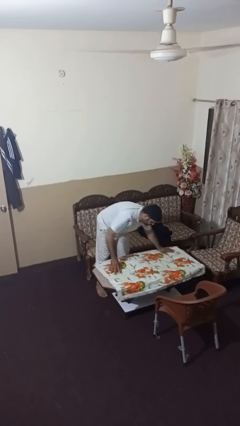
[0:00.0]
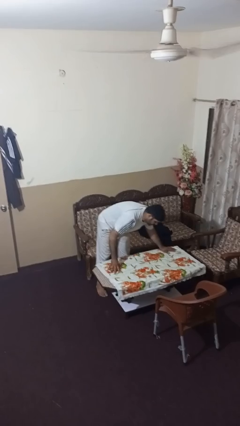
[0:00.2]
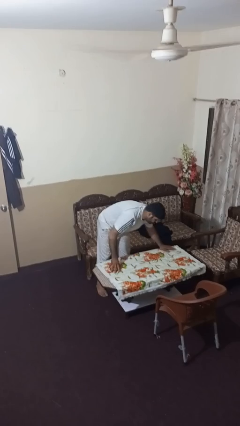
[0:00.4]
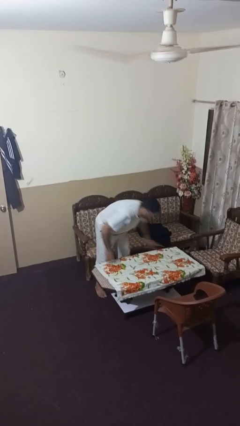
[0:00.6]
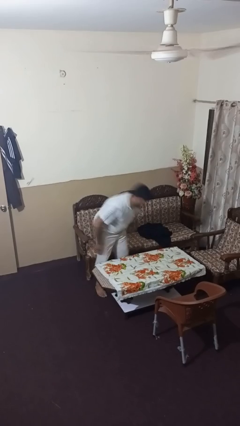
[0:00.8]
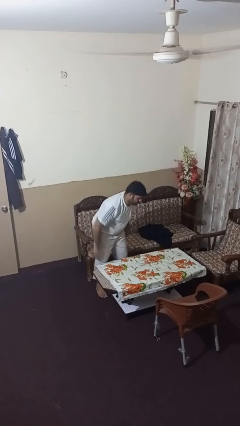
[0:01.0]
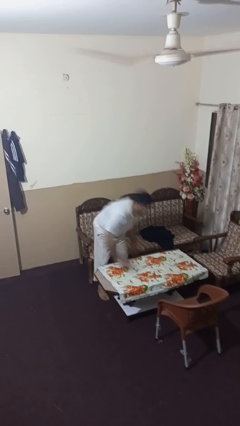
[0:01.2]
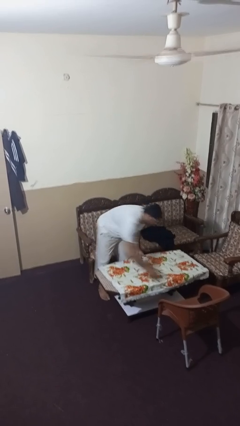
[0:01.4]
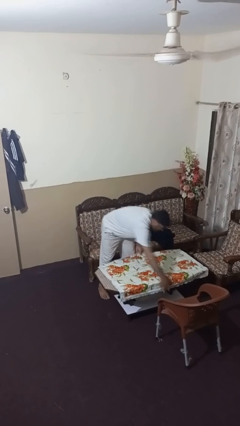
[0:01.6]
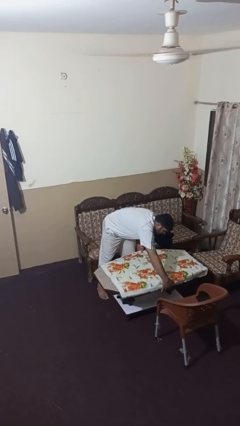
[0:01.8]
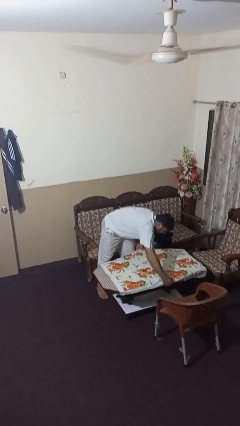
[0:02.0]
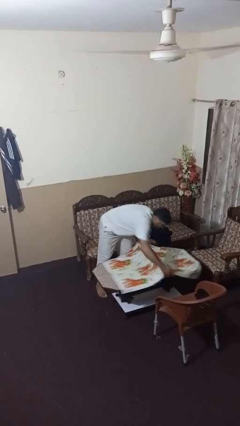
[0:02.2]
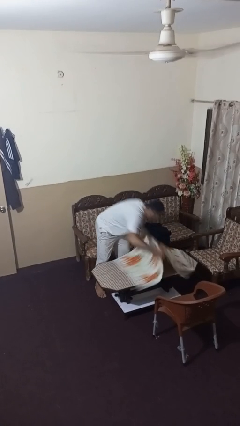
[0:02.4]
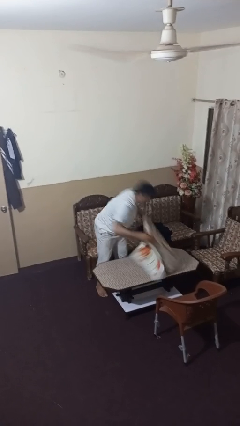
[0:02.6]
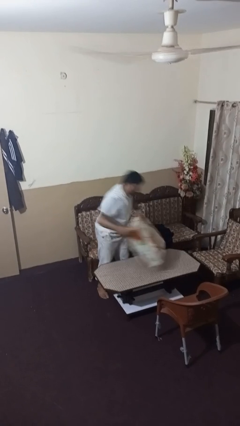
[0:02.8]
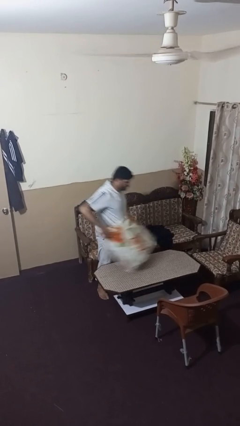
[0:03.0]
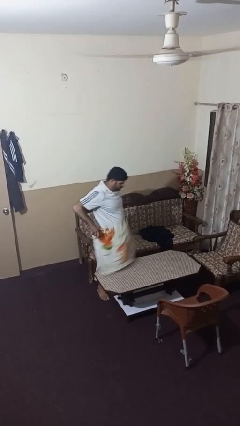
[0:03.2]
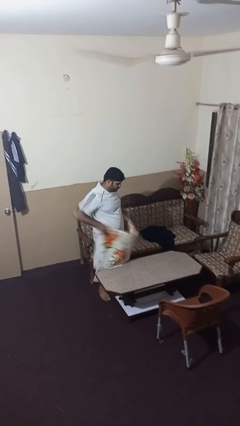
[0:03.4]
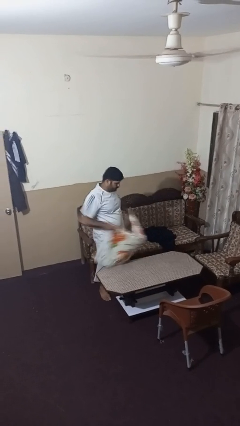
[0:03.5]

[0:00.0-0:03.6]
person folds tablecloth

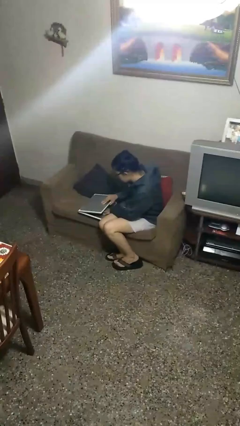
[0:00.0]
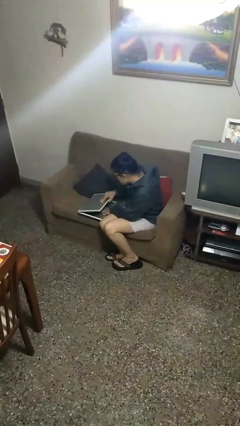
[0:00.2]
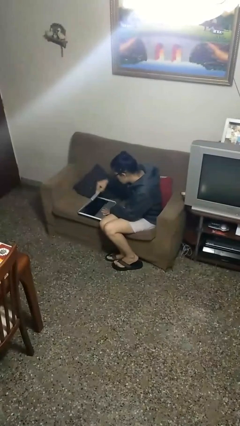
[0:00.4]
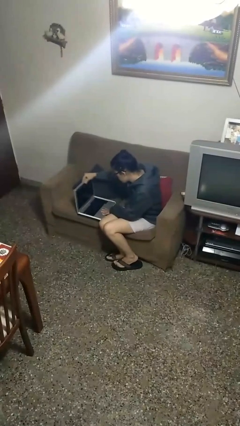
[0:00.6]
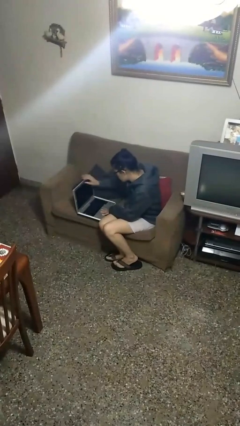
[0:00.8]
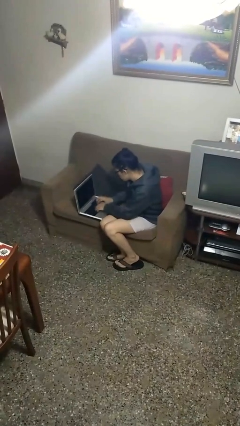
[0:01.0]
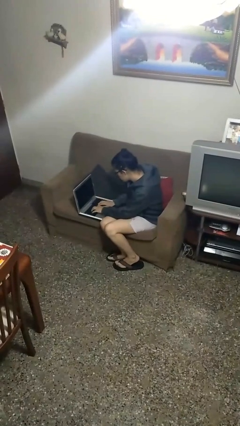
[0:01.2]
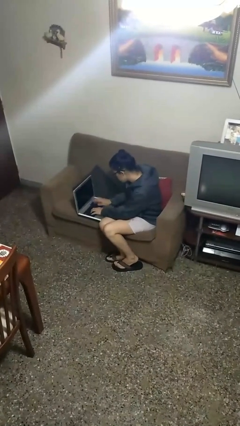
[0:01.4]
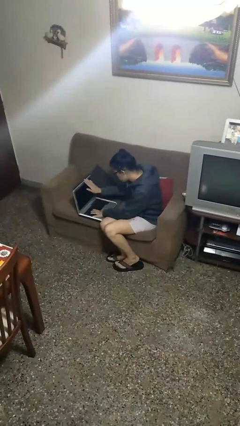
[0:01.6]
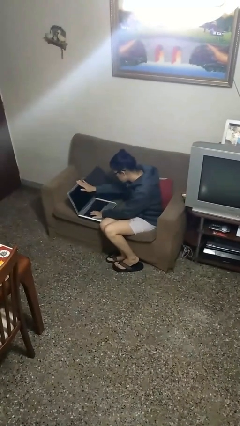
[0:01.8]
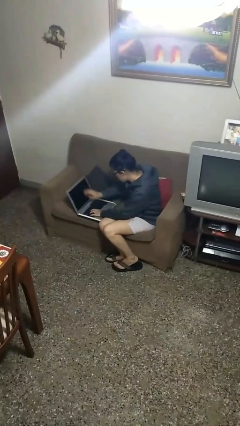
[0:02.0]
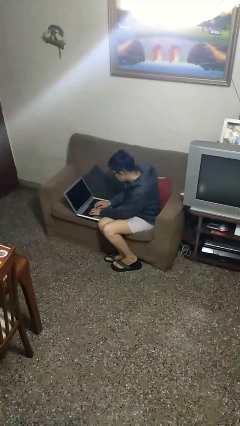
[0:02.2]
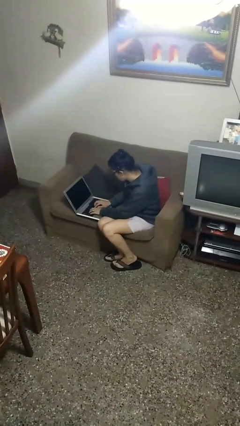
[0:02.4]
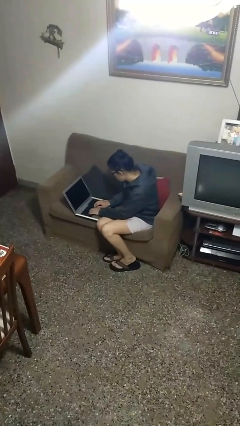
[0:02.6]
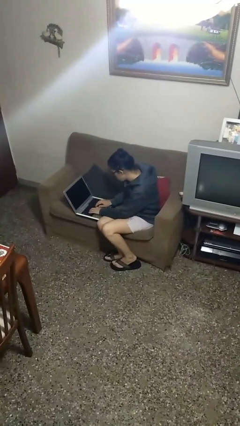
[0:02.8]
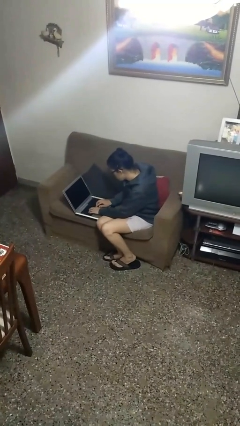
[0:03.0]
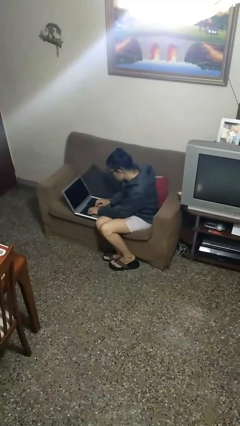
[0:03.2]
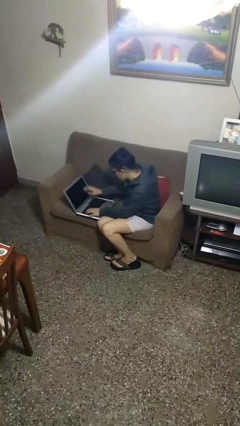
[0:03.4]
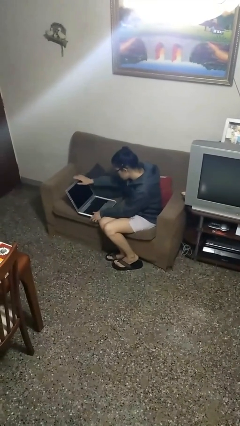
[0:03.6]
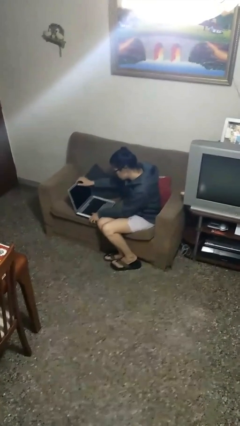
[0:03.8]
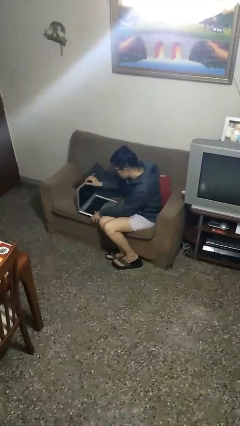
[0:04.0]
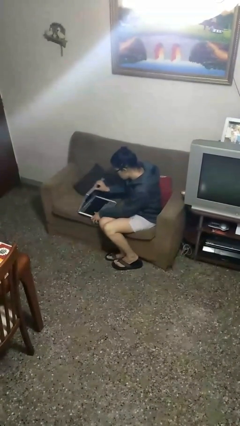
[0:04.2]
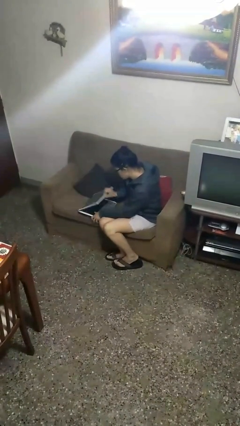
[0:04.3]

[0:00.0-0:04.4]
person interacts with laptop

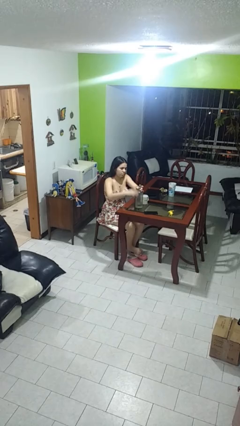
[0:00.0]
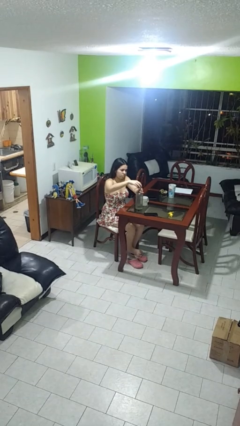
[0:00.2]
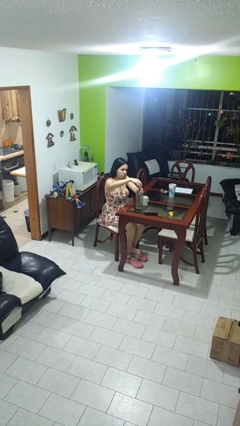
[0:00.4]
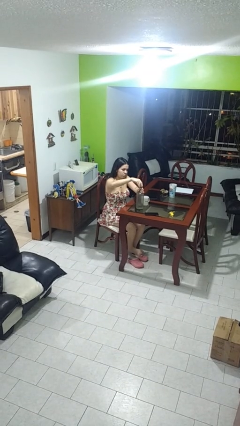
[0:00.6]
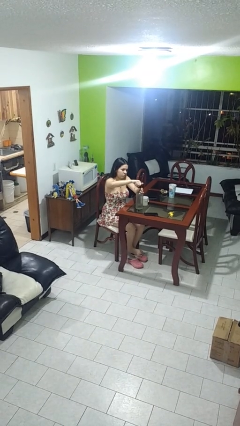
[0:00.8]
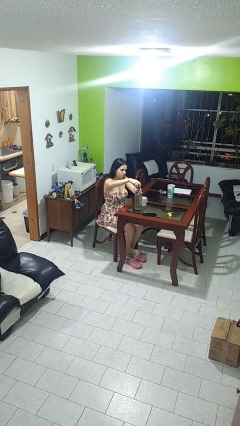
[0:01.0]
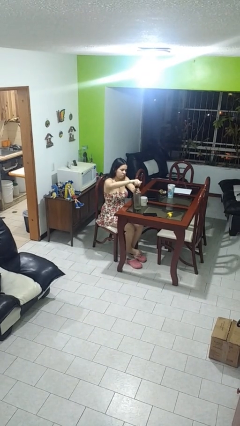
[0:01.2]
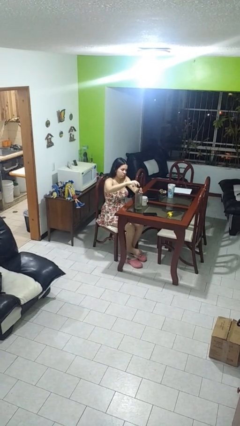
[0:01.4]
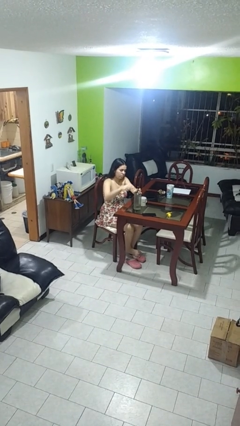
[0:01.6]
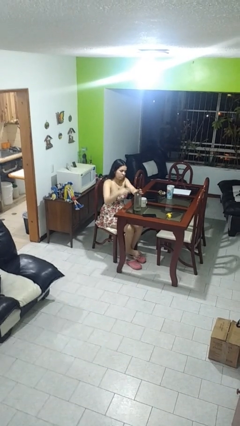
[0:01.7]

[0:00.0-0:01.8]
person screws lid to bottle

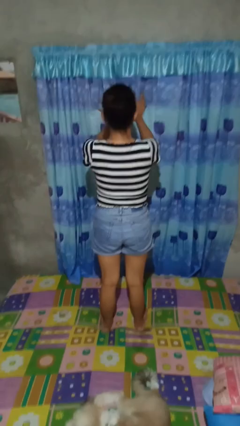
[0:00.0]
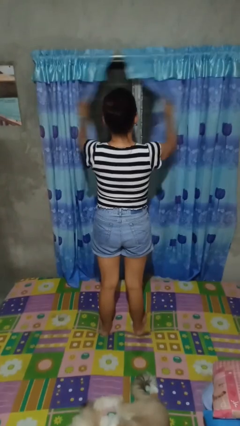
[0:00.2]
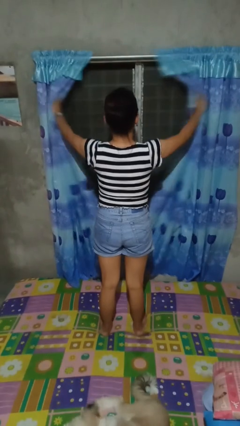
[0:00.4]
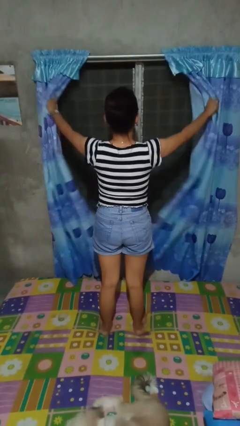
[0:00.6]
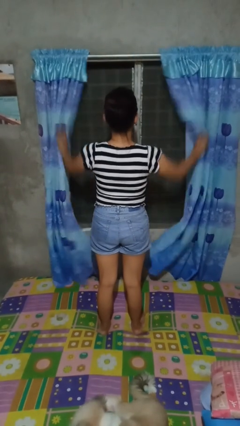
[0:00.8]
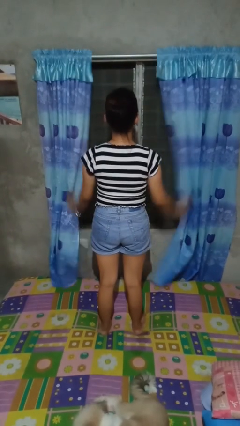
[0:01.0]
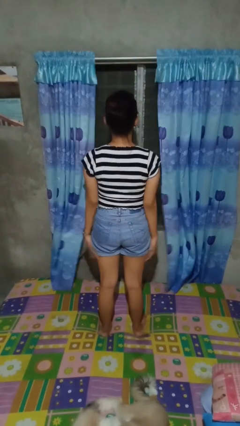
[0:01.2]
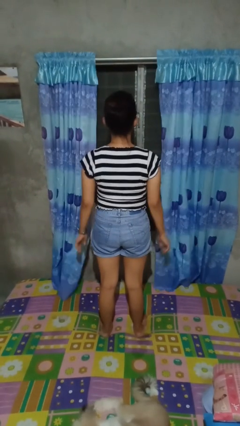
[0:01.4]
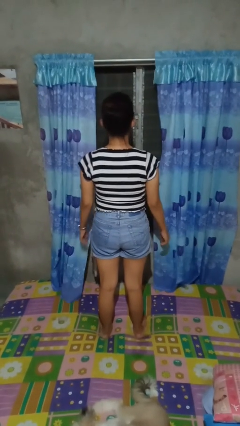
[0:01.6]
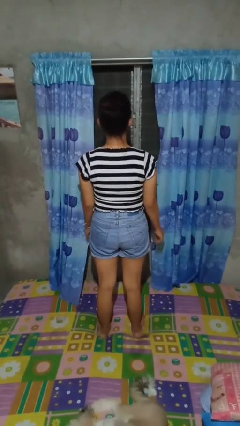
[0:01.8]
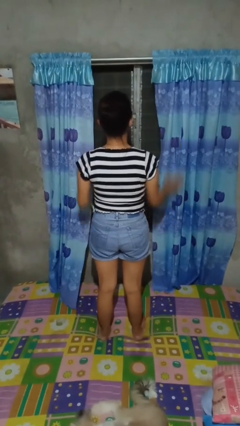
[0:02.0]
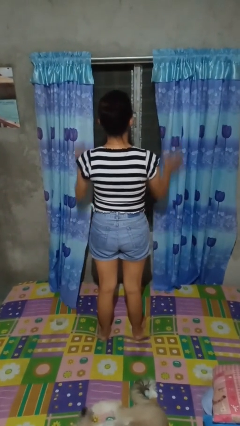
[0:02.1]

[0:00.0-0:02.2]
person opens curtains

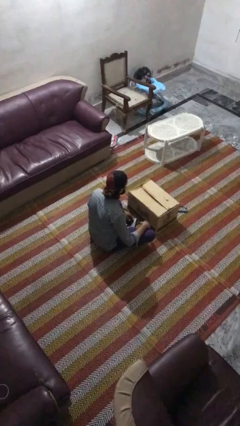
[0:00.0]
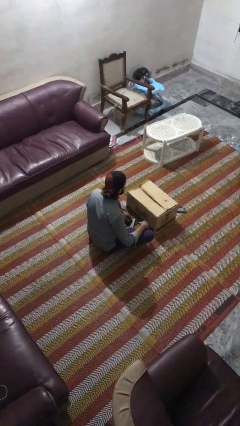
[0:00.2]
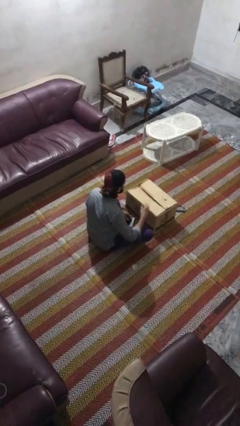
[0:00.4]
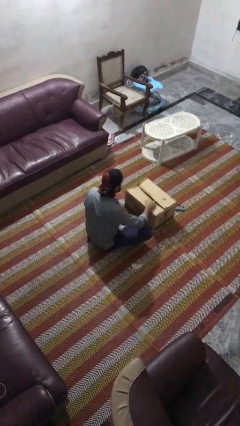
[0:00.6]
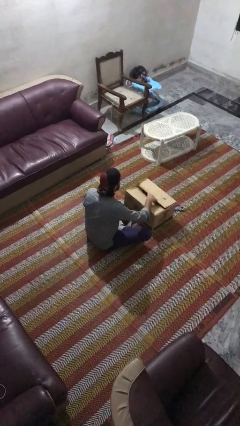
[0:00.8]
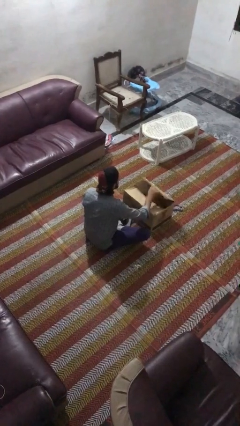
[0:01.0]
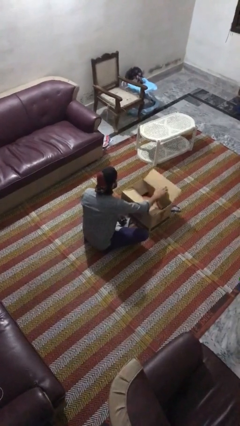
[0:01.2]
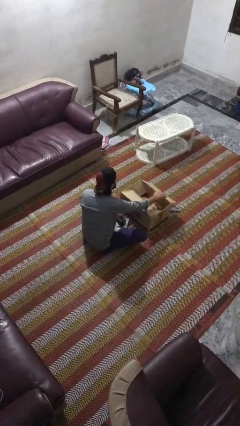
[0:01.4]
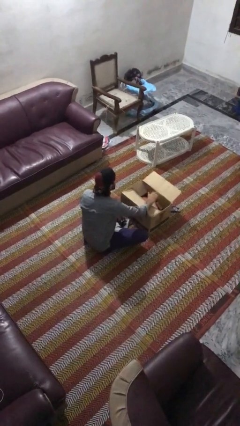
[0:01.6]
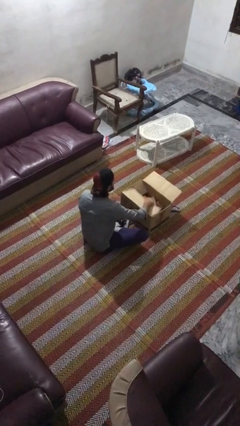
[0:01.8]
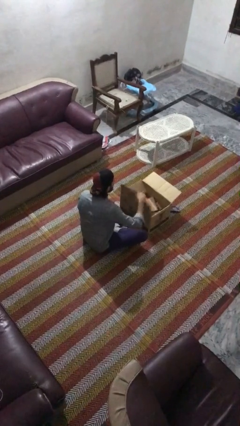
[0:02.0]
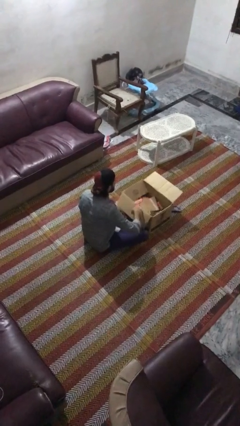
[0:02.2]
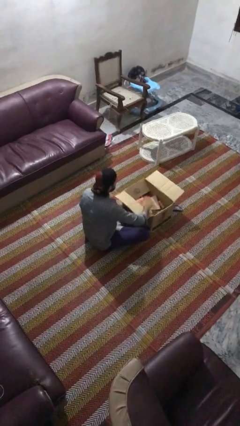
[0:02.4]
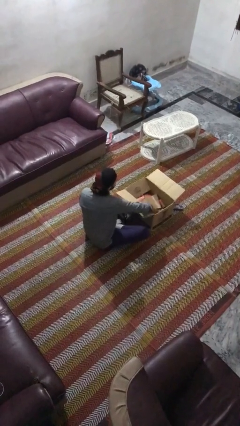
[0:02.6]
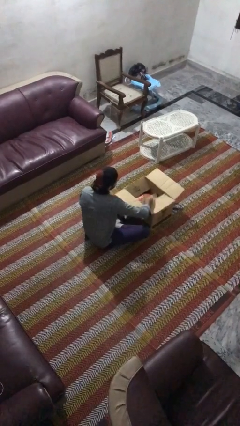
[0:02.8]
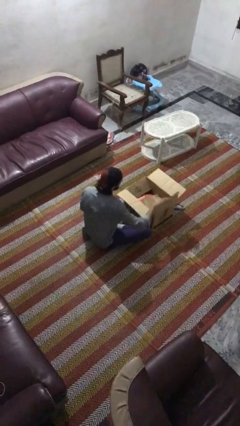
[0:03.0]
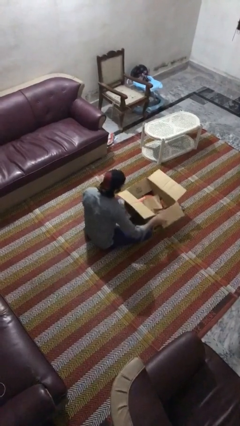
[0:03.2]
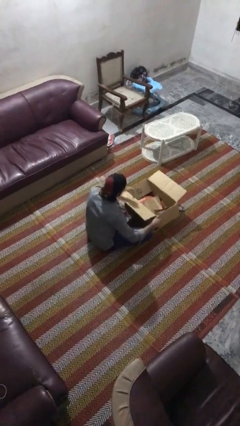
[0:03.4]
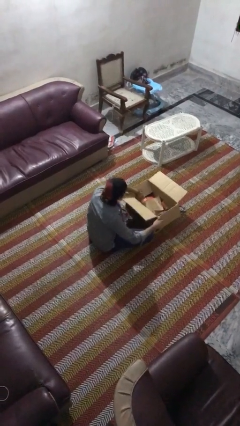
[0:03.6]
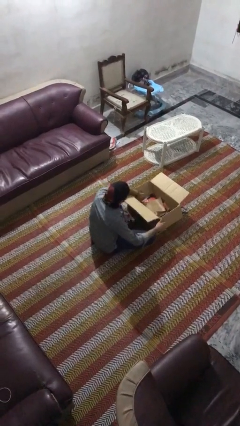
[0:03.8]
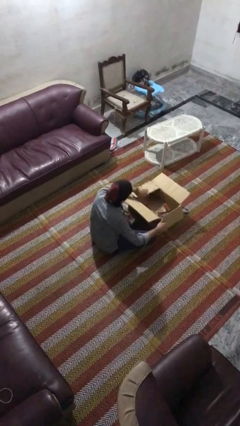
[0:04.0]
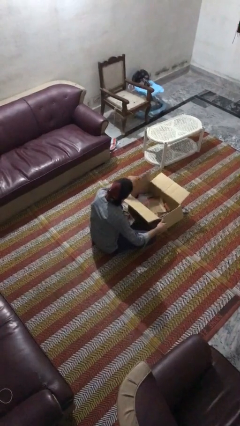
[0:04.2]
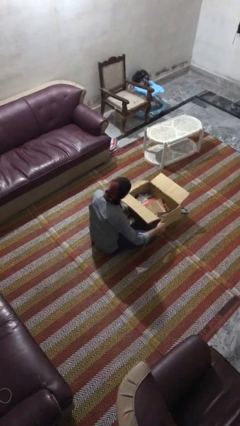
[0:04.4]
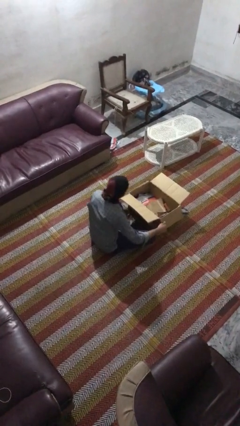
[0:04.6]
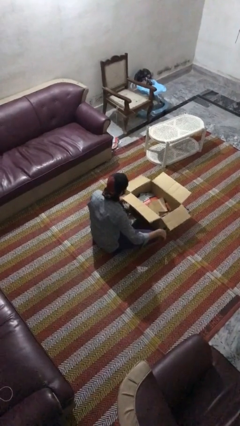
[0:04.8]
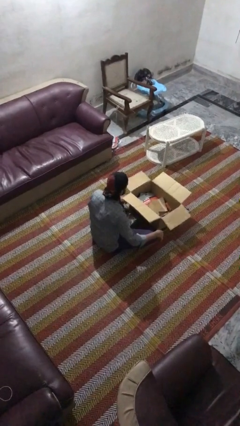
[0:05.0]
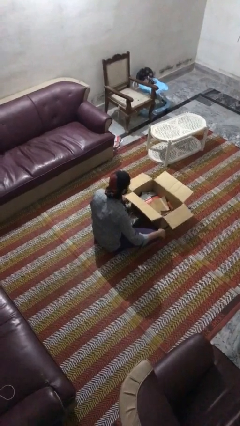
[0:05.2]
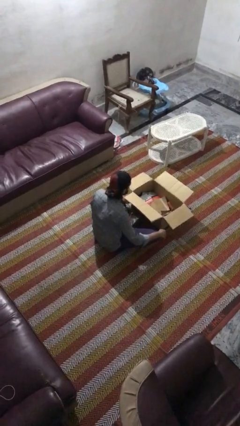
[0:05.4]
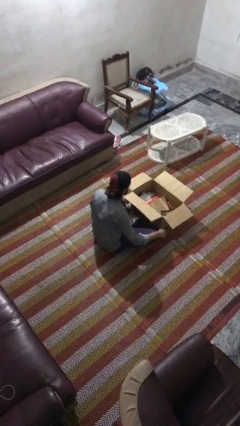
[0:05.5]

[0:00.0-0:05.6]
person opens box

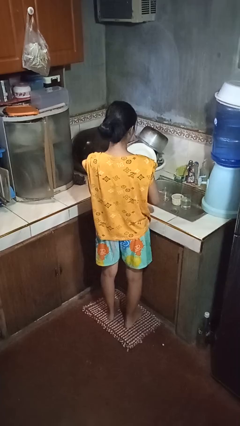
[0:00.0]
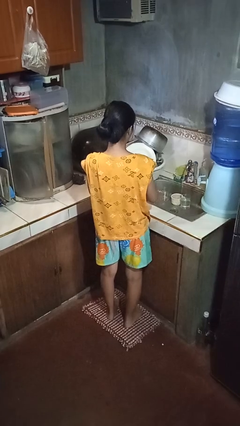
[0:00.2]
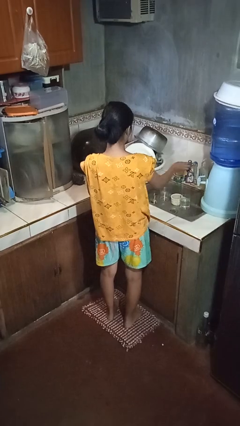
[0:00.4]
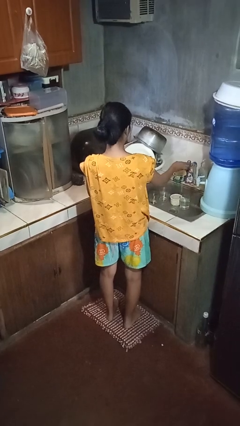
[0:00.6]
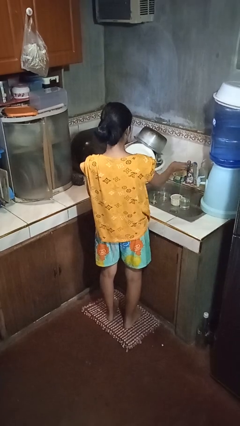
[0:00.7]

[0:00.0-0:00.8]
person turns off faucet
